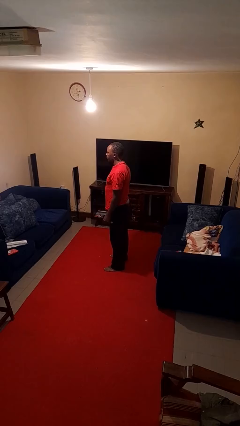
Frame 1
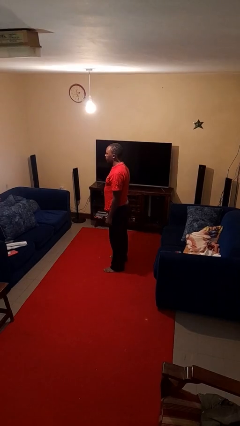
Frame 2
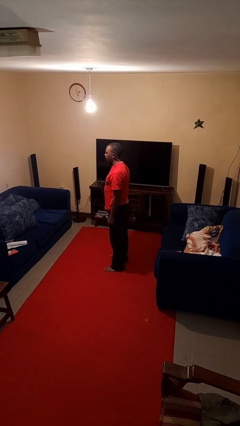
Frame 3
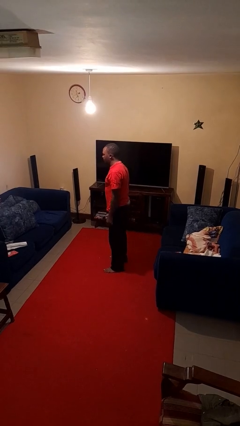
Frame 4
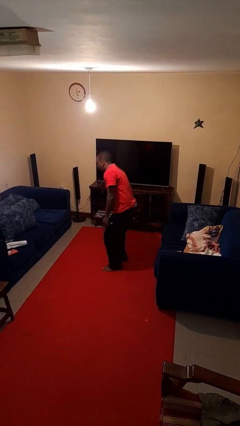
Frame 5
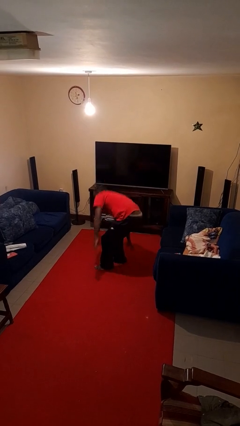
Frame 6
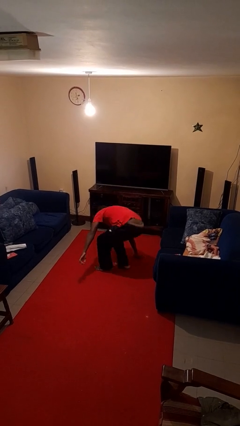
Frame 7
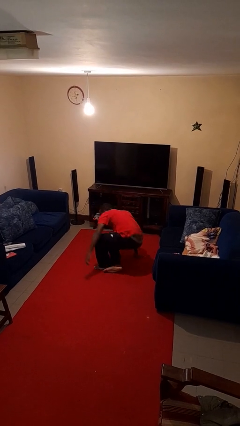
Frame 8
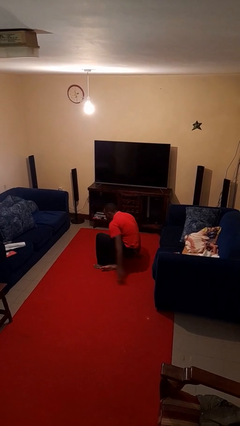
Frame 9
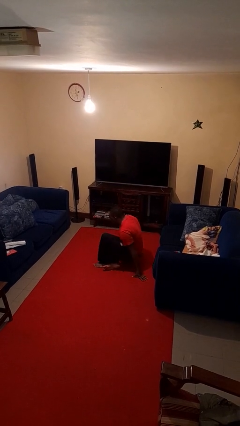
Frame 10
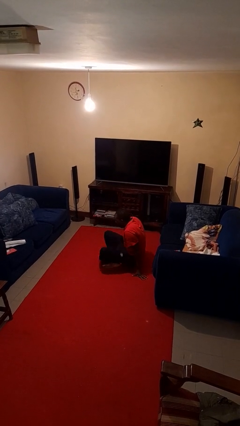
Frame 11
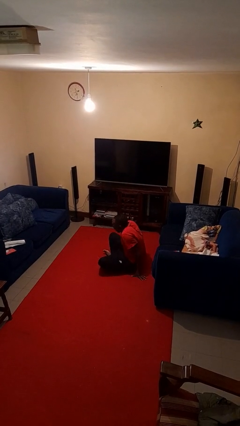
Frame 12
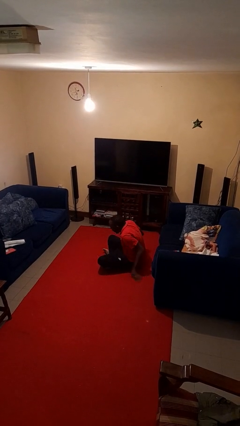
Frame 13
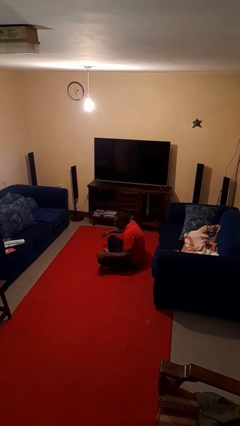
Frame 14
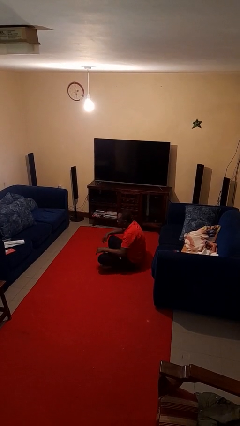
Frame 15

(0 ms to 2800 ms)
person sits crisscross

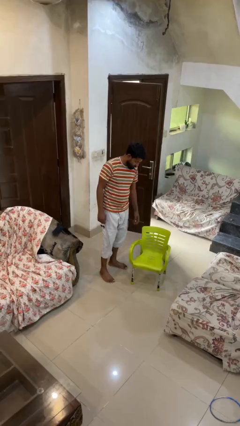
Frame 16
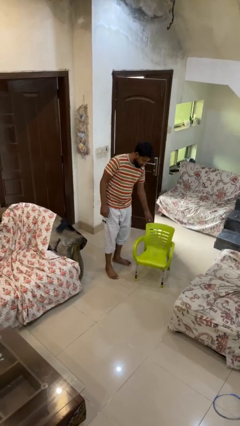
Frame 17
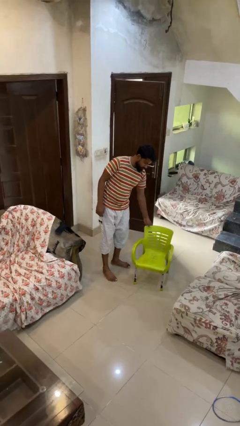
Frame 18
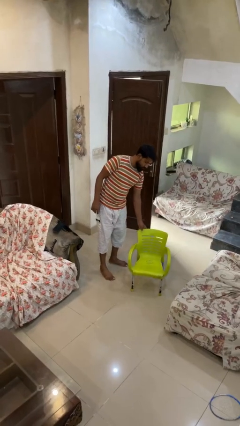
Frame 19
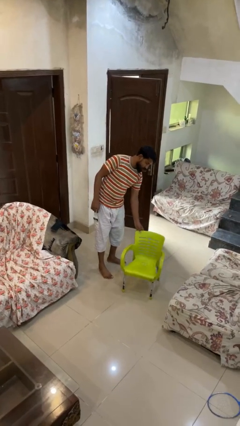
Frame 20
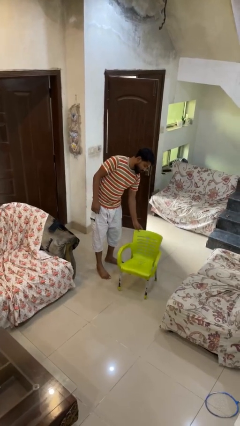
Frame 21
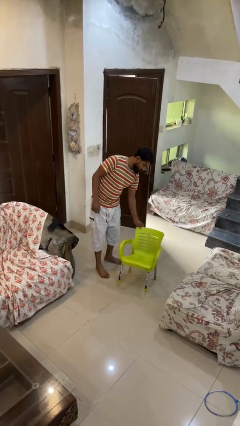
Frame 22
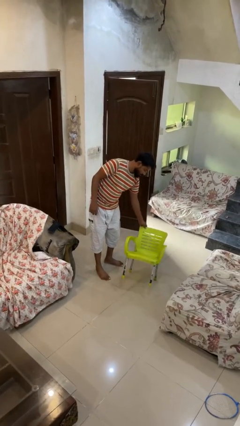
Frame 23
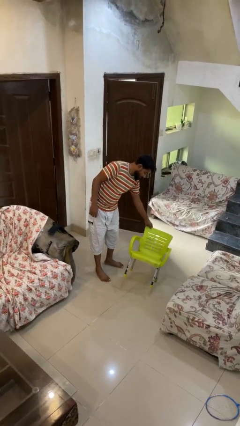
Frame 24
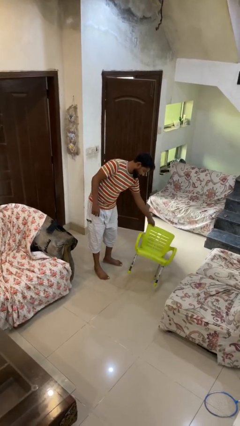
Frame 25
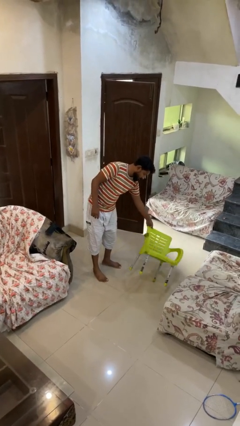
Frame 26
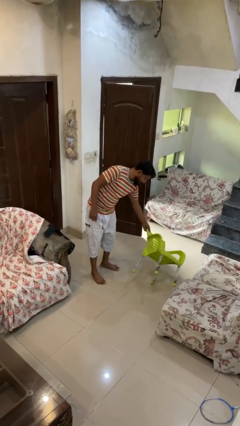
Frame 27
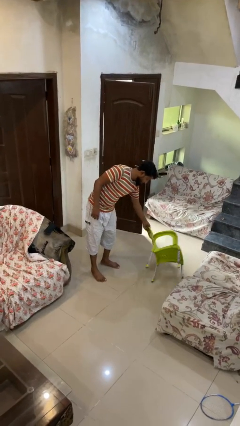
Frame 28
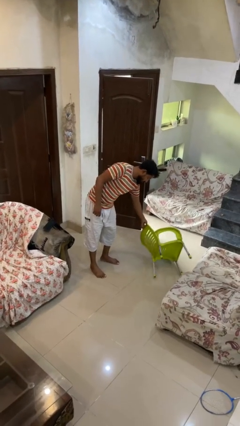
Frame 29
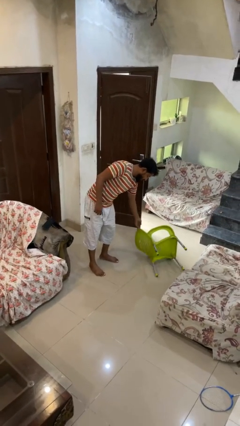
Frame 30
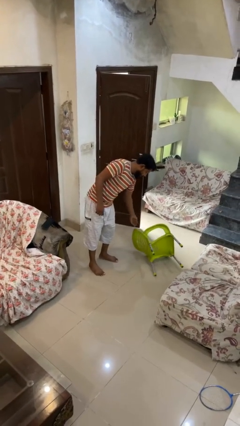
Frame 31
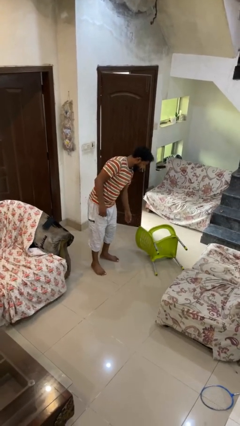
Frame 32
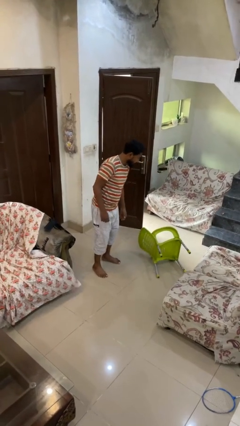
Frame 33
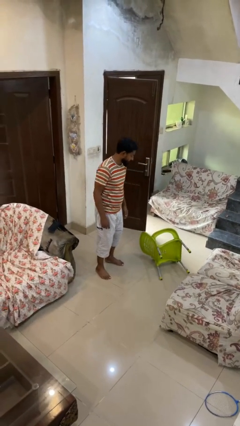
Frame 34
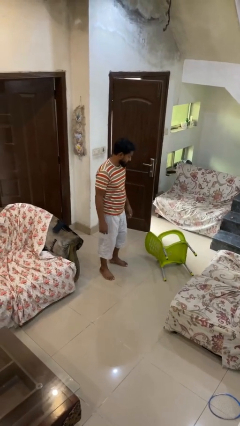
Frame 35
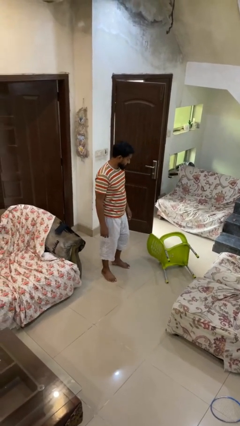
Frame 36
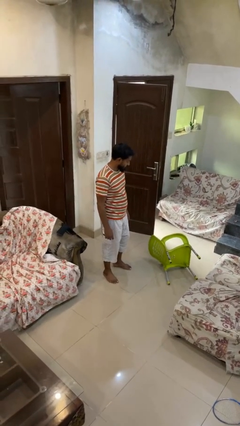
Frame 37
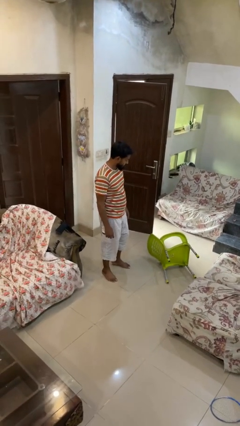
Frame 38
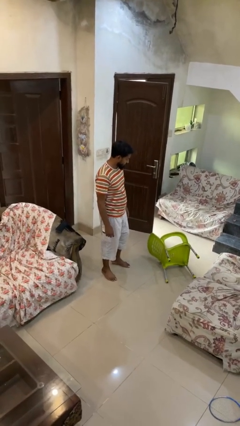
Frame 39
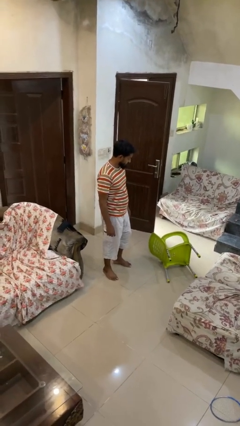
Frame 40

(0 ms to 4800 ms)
person knocks over furniture

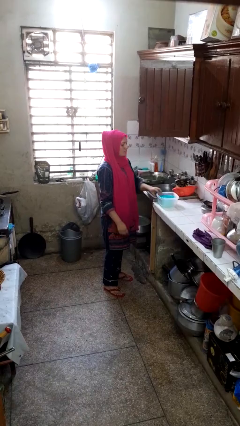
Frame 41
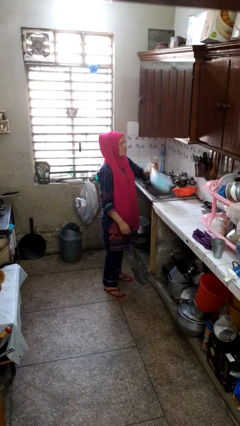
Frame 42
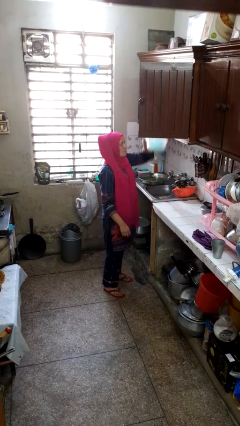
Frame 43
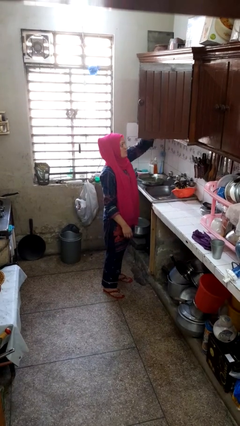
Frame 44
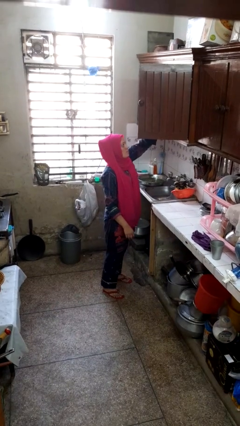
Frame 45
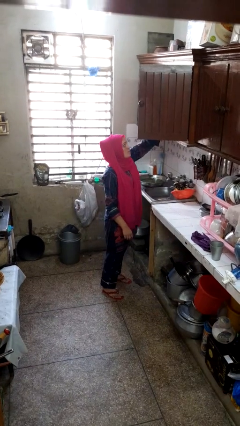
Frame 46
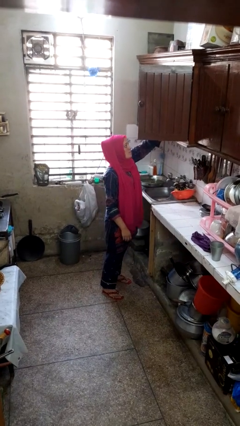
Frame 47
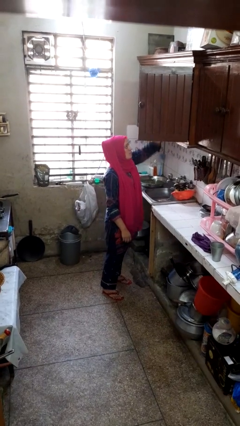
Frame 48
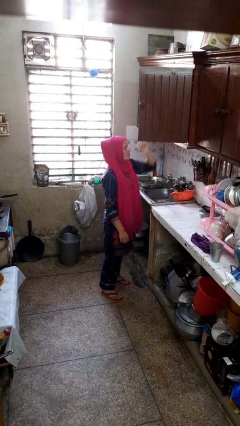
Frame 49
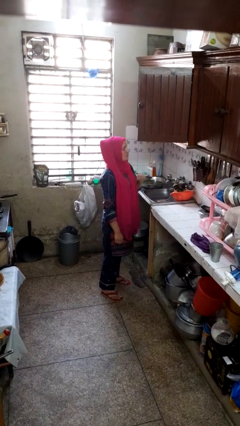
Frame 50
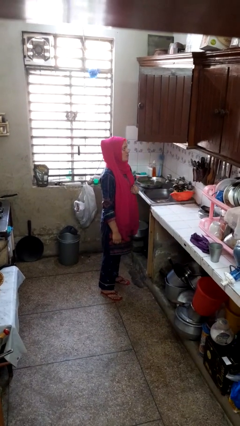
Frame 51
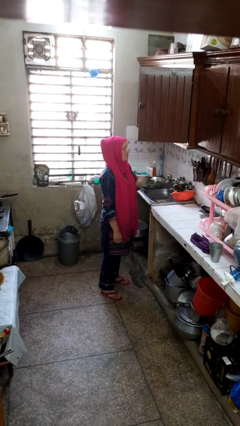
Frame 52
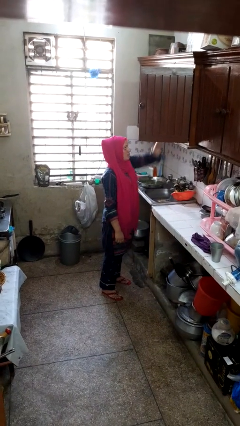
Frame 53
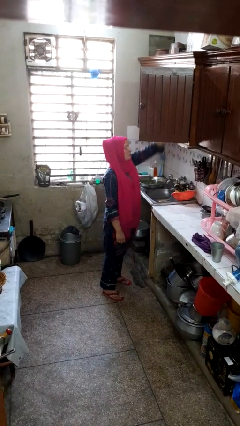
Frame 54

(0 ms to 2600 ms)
person puts object in cabinet

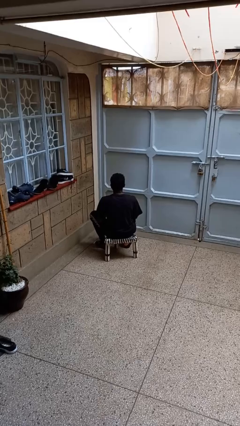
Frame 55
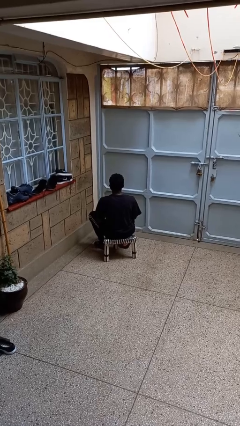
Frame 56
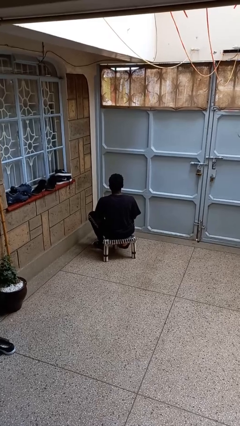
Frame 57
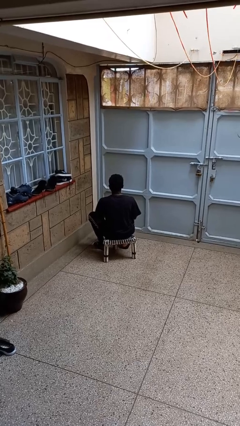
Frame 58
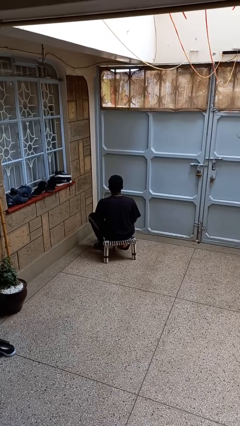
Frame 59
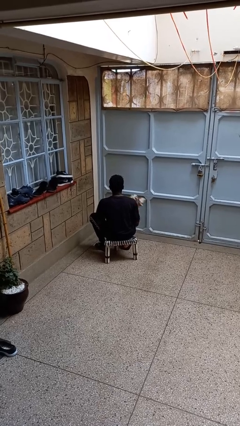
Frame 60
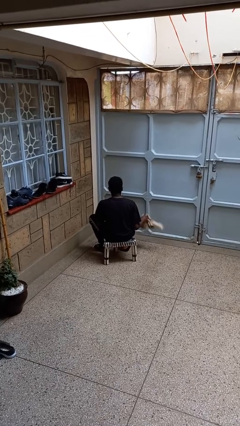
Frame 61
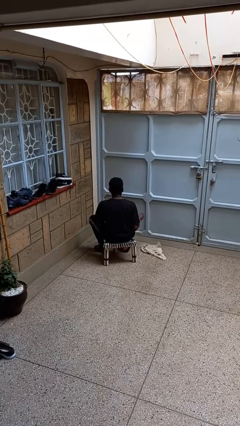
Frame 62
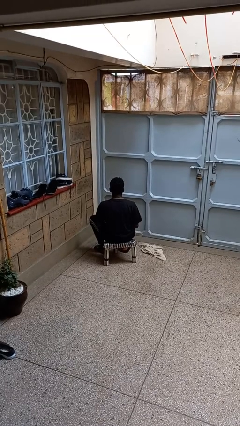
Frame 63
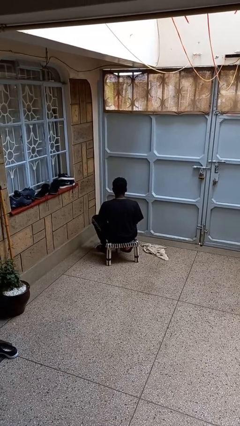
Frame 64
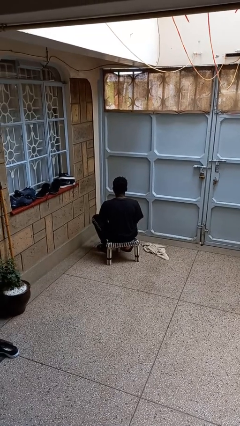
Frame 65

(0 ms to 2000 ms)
person throws object to ground

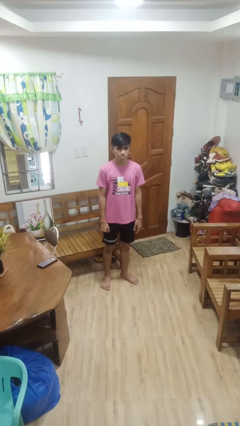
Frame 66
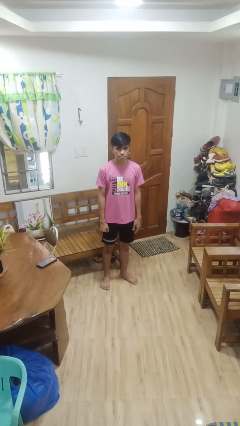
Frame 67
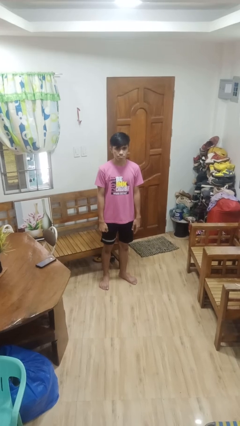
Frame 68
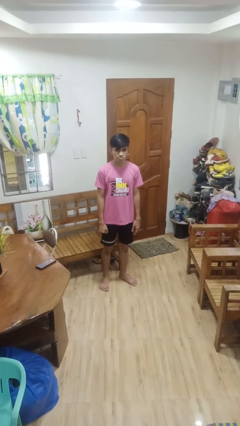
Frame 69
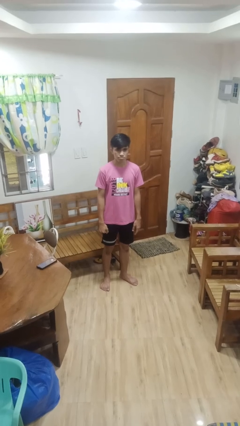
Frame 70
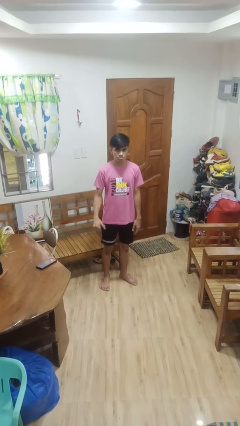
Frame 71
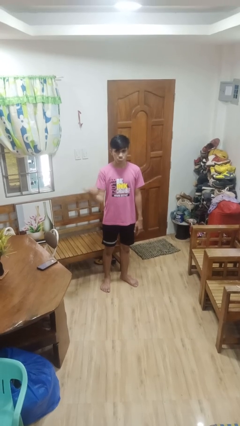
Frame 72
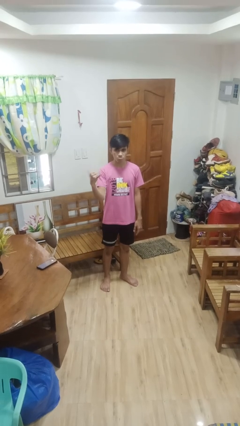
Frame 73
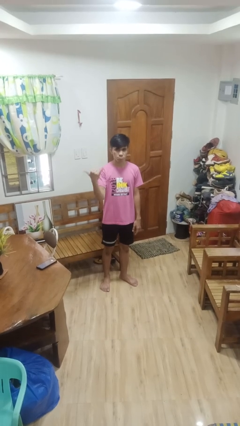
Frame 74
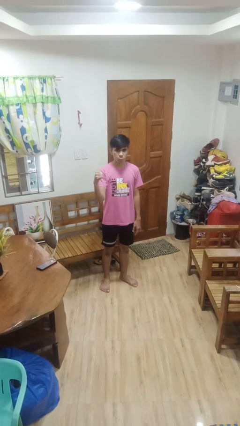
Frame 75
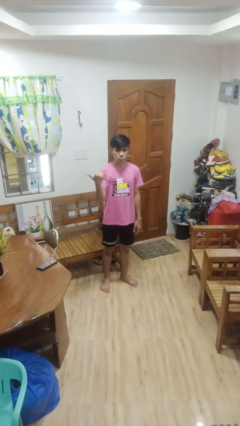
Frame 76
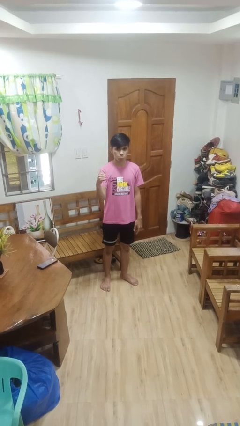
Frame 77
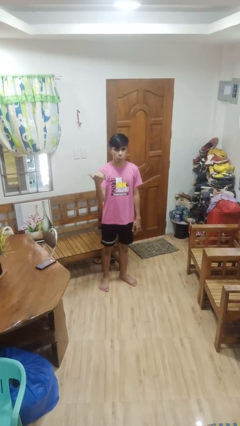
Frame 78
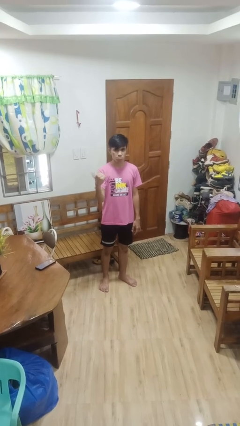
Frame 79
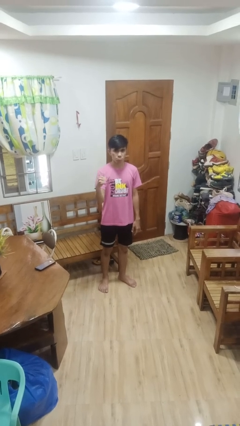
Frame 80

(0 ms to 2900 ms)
person gestures hang loose

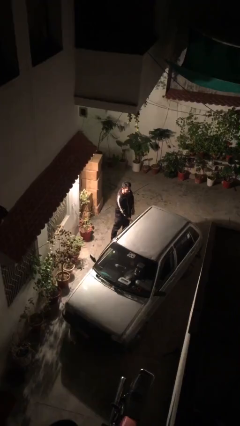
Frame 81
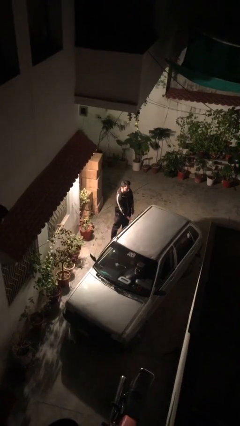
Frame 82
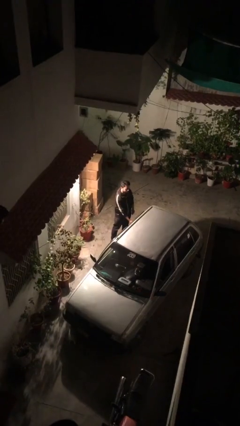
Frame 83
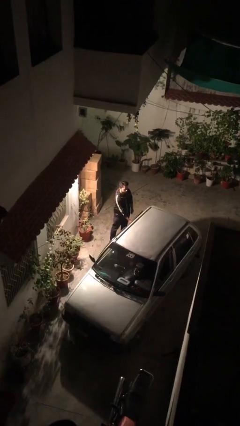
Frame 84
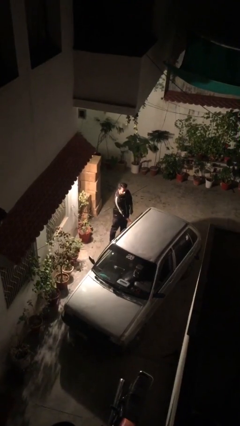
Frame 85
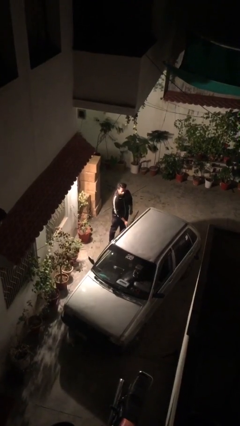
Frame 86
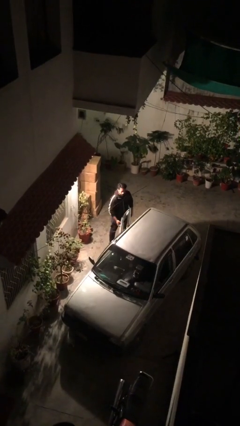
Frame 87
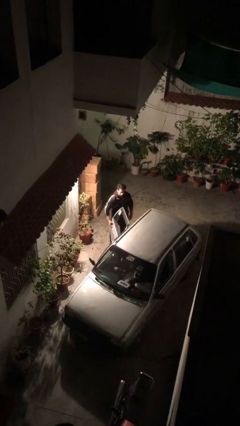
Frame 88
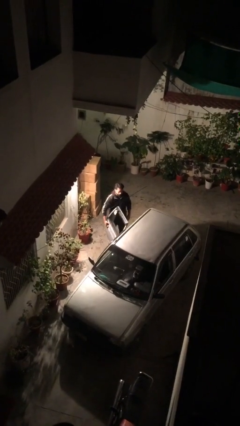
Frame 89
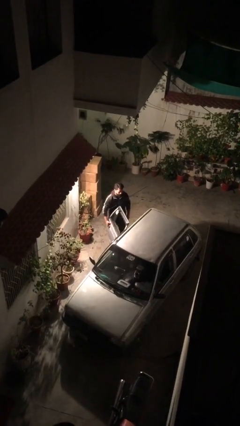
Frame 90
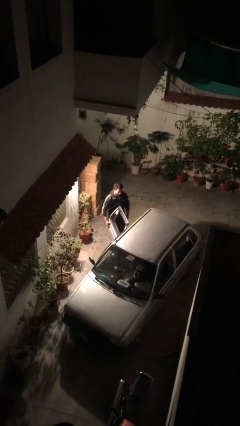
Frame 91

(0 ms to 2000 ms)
person opens car door

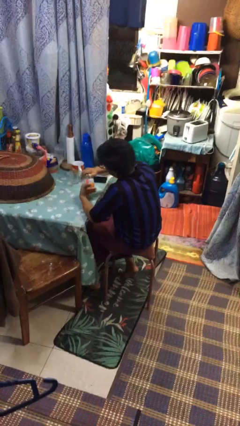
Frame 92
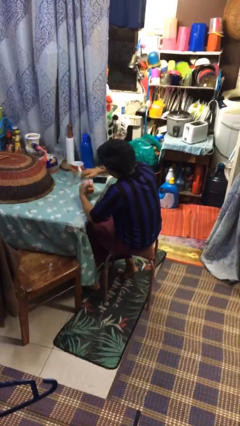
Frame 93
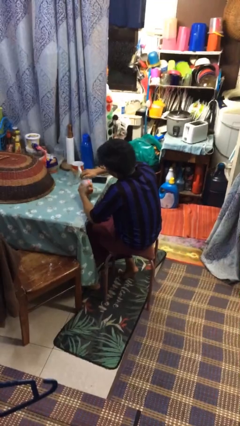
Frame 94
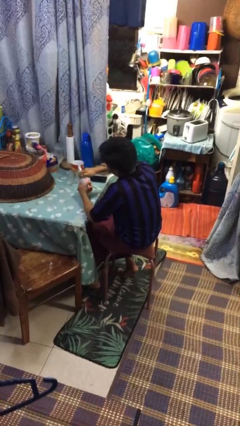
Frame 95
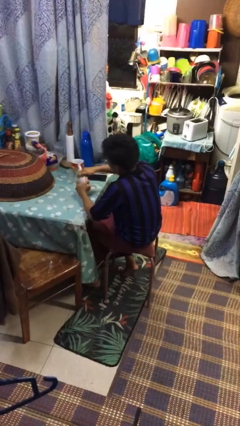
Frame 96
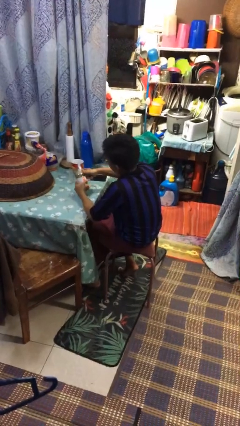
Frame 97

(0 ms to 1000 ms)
person closes jar
